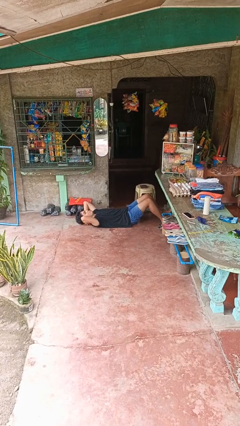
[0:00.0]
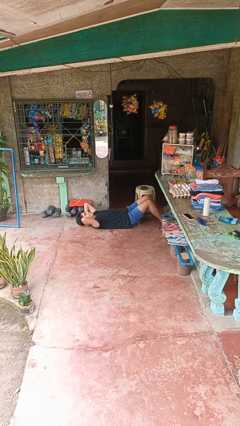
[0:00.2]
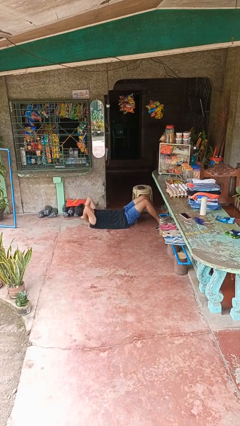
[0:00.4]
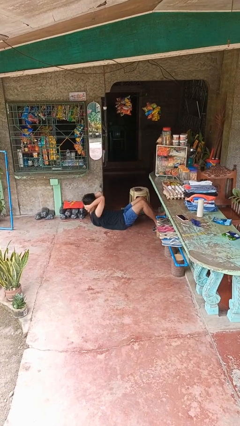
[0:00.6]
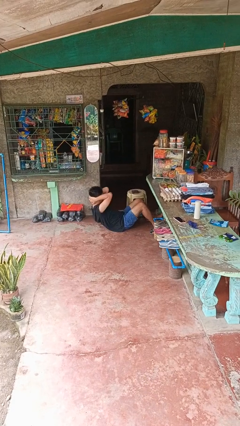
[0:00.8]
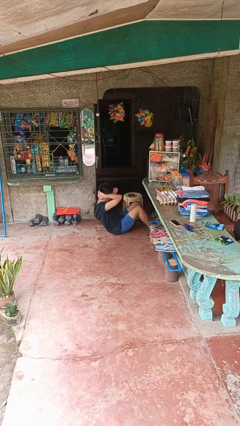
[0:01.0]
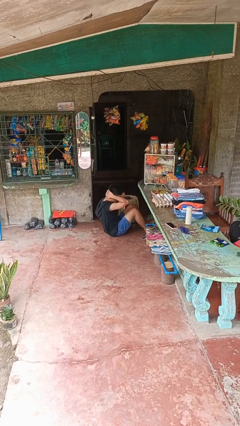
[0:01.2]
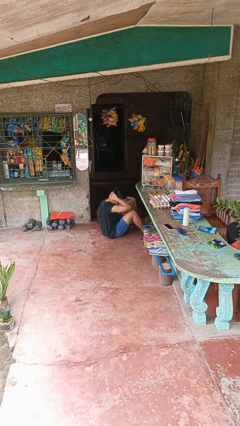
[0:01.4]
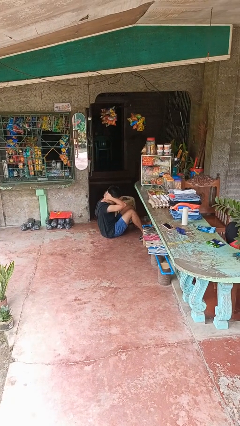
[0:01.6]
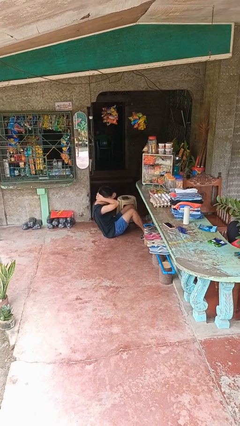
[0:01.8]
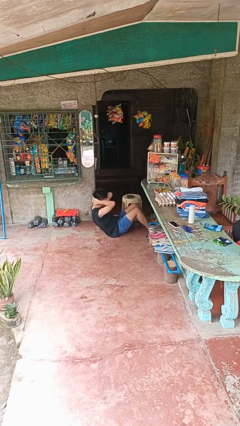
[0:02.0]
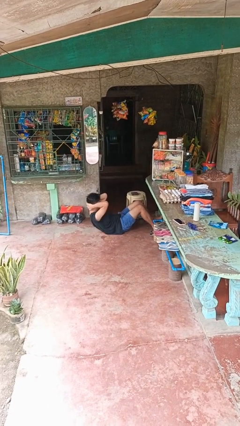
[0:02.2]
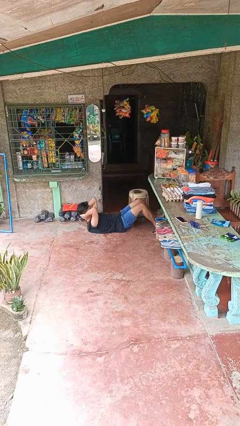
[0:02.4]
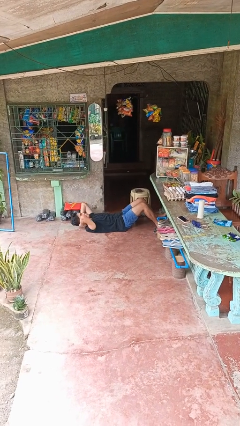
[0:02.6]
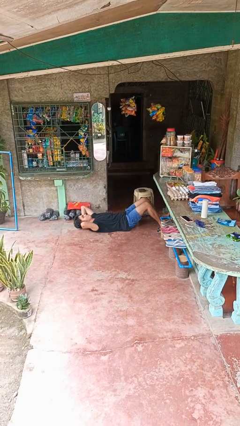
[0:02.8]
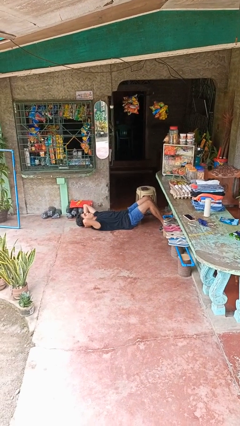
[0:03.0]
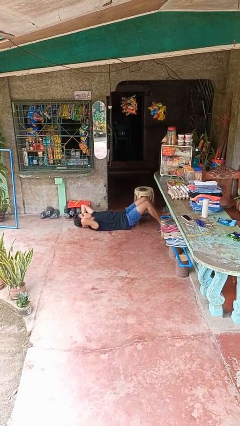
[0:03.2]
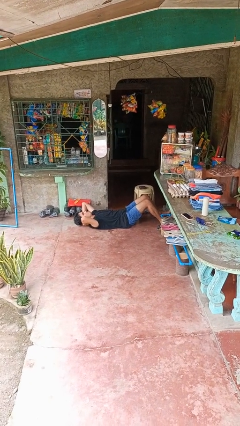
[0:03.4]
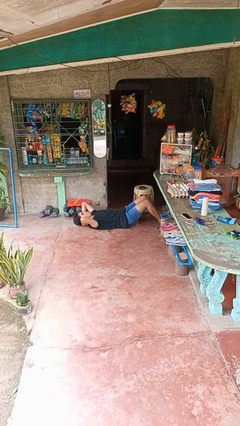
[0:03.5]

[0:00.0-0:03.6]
person exercises with situp

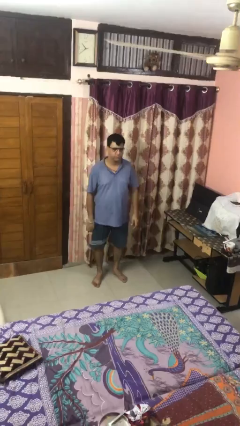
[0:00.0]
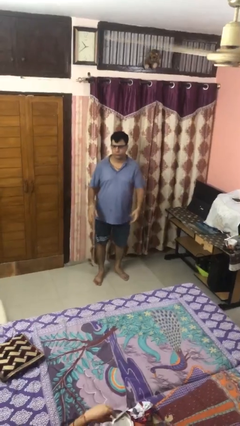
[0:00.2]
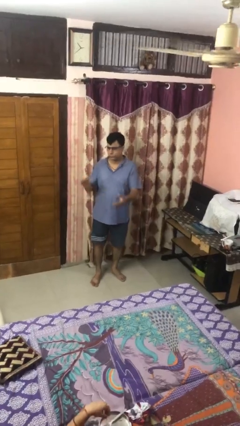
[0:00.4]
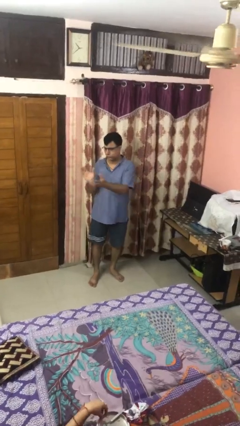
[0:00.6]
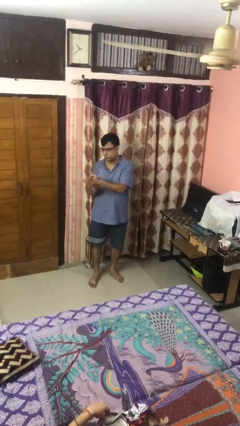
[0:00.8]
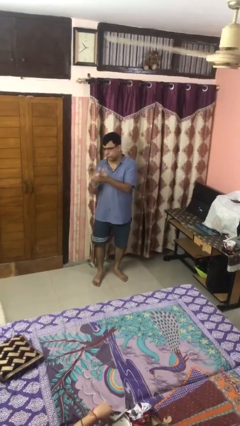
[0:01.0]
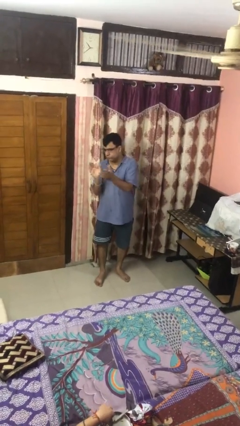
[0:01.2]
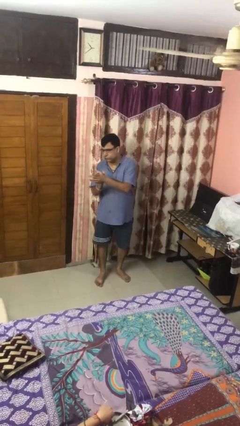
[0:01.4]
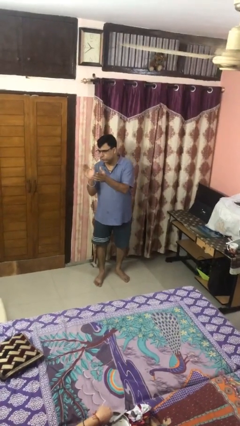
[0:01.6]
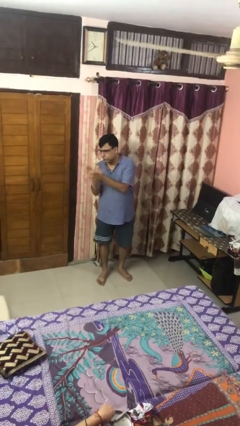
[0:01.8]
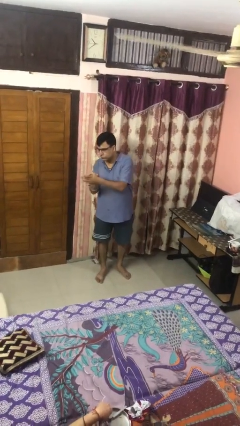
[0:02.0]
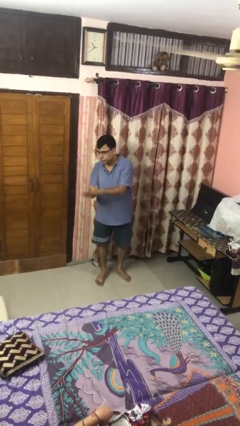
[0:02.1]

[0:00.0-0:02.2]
person claps hands

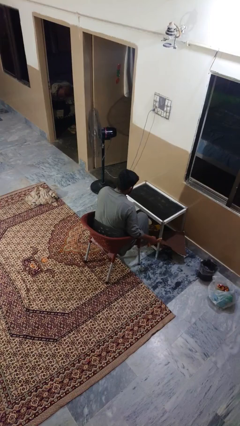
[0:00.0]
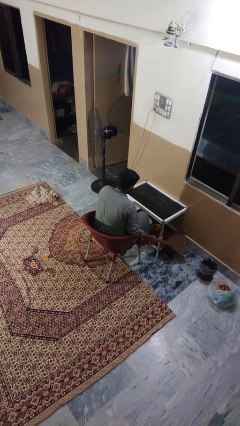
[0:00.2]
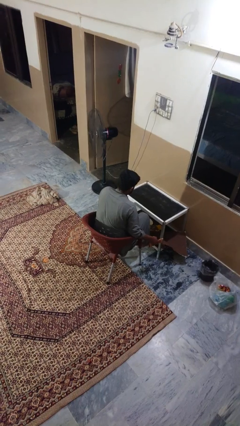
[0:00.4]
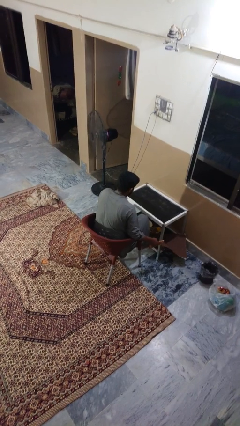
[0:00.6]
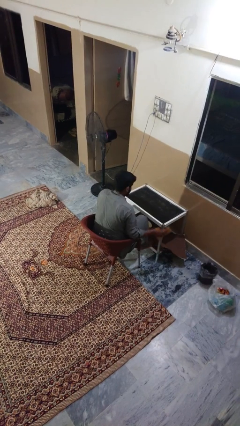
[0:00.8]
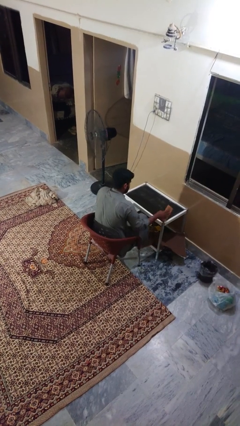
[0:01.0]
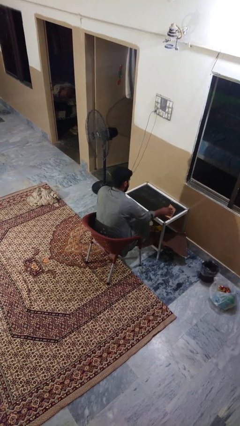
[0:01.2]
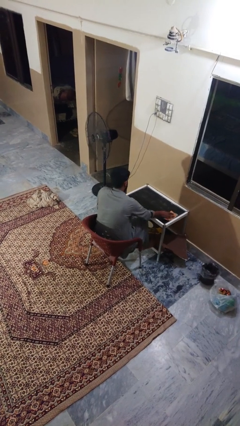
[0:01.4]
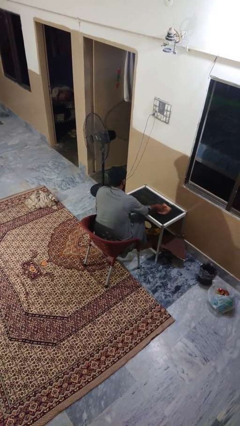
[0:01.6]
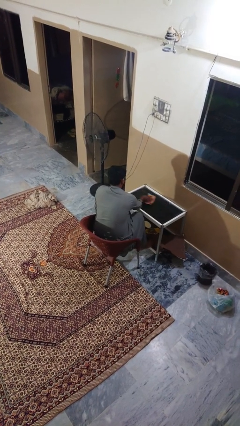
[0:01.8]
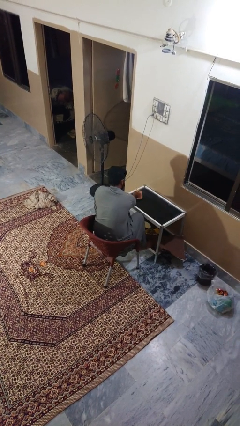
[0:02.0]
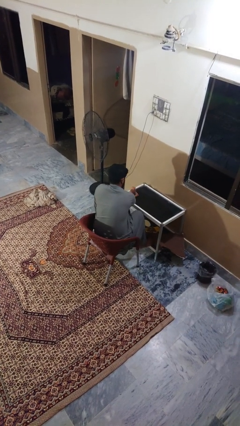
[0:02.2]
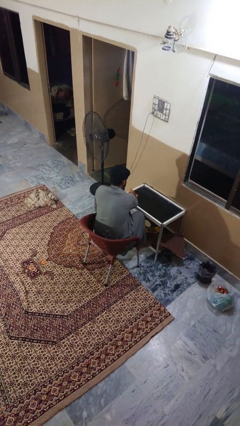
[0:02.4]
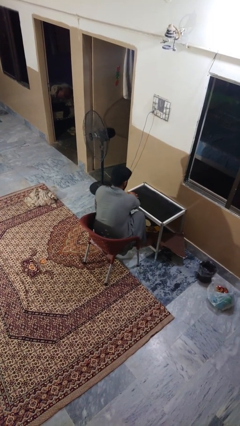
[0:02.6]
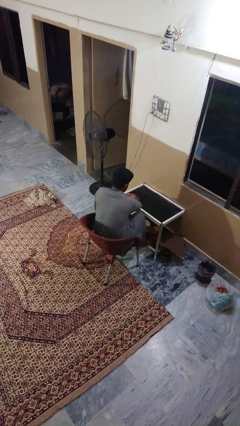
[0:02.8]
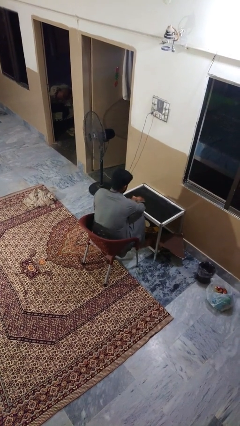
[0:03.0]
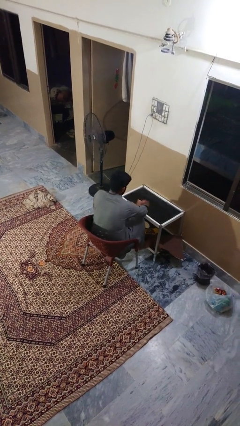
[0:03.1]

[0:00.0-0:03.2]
person cleans table with rag

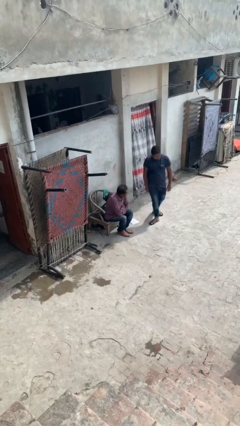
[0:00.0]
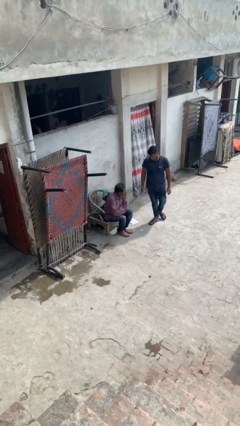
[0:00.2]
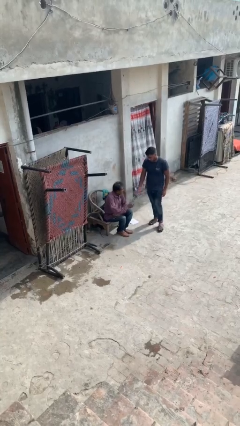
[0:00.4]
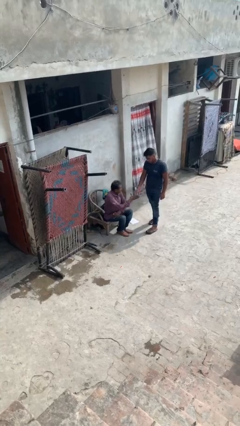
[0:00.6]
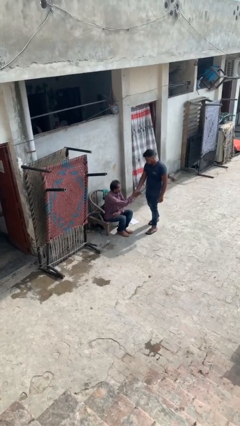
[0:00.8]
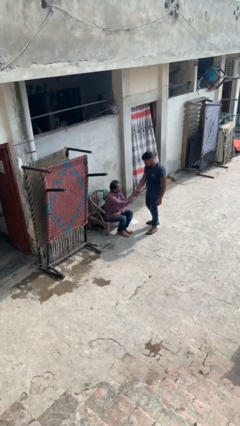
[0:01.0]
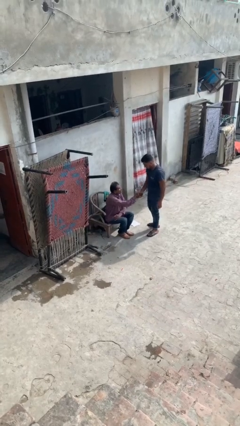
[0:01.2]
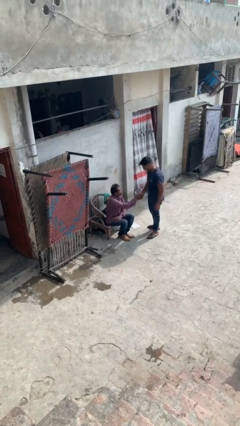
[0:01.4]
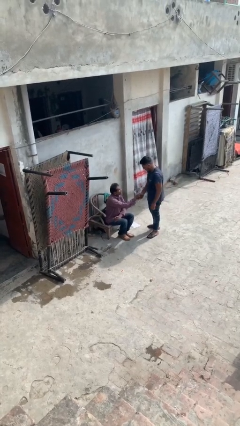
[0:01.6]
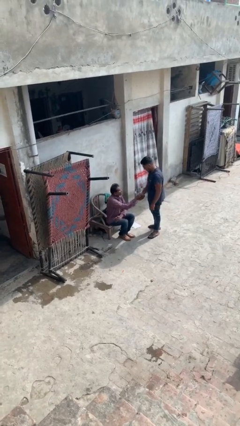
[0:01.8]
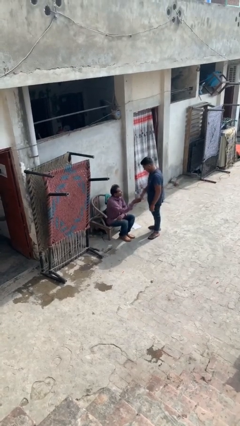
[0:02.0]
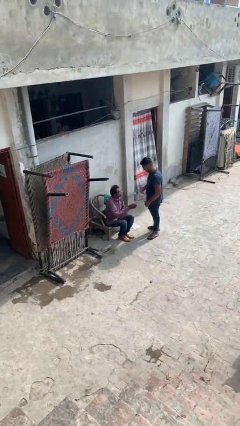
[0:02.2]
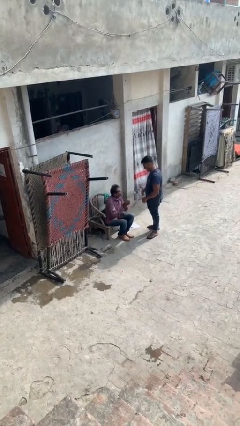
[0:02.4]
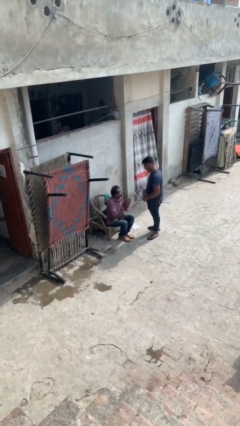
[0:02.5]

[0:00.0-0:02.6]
person shakes hand

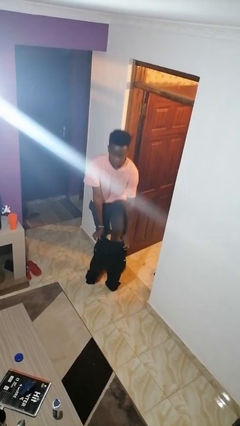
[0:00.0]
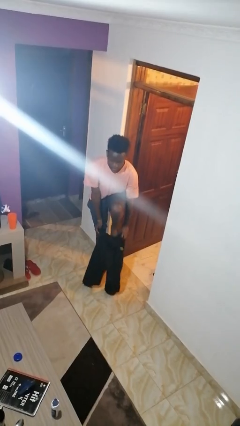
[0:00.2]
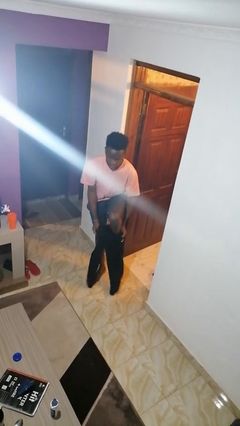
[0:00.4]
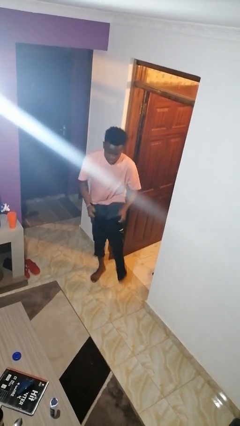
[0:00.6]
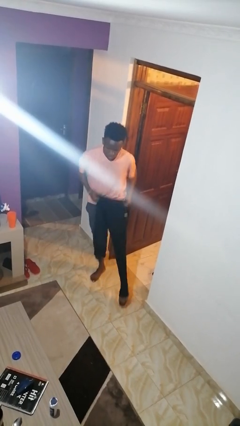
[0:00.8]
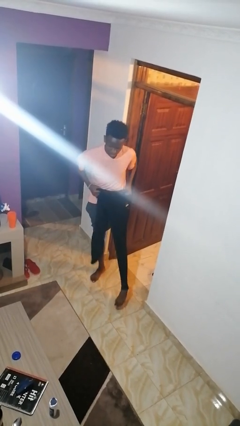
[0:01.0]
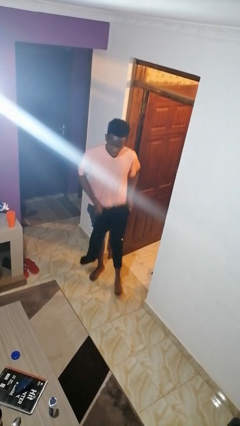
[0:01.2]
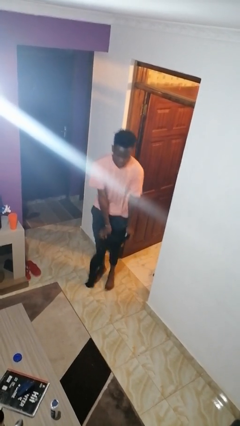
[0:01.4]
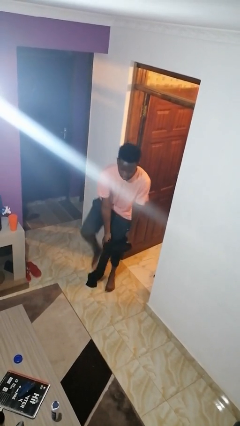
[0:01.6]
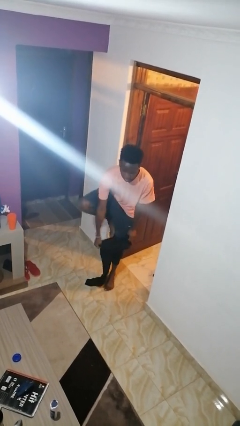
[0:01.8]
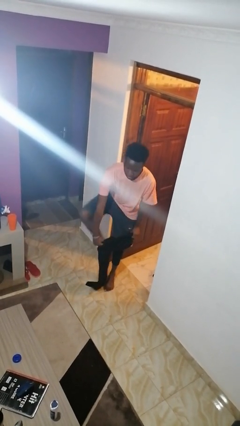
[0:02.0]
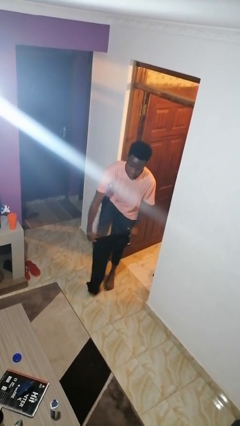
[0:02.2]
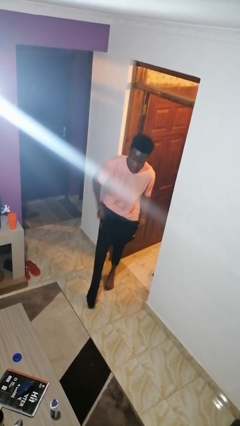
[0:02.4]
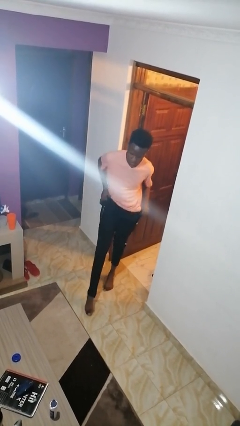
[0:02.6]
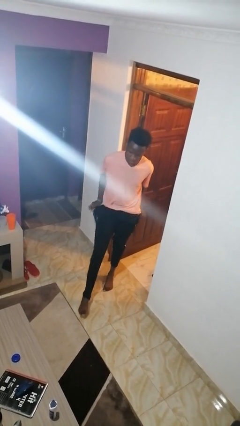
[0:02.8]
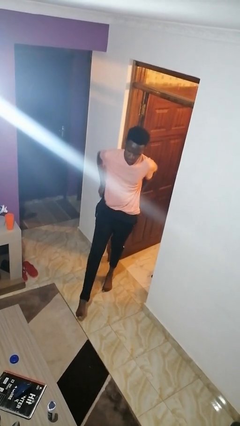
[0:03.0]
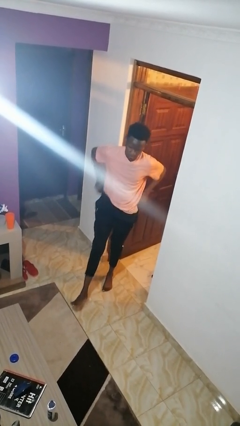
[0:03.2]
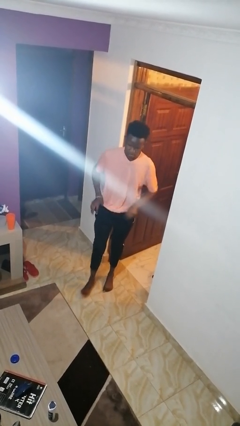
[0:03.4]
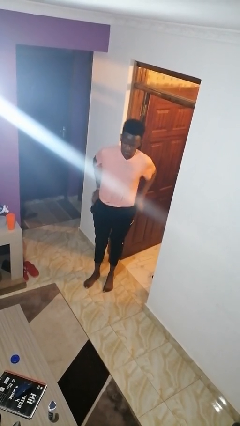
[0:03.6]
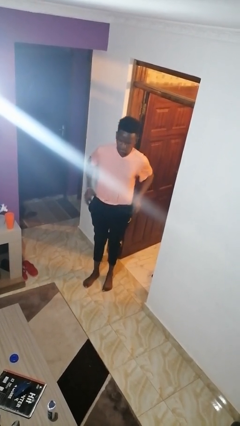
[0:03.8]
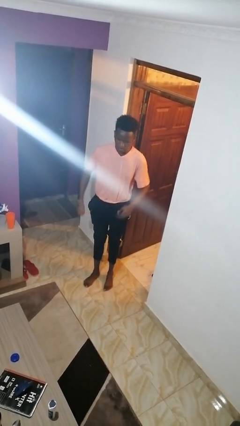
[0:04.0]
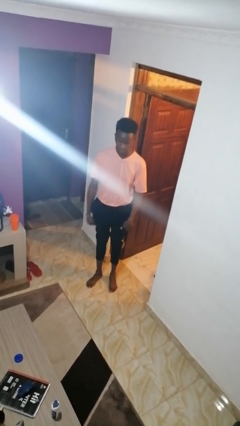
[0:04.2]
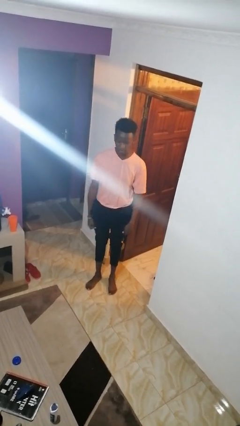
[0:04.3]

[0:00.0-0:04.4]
person puts on pants

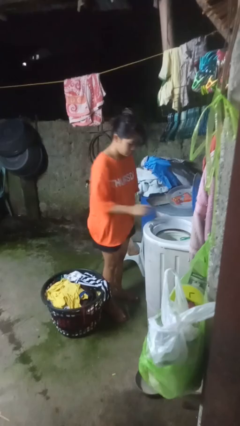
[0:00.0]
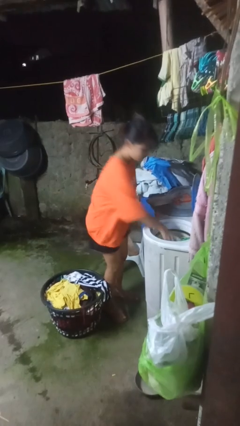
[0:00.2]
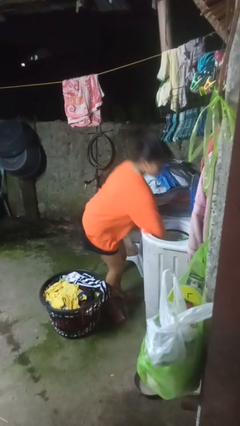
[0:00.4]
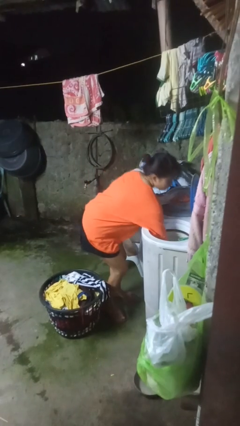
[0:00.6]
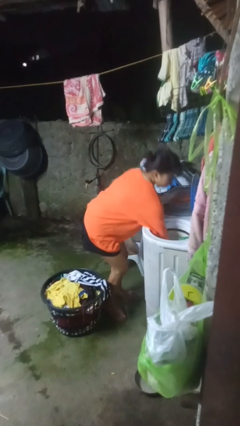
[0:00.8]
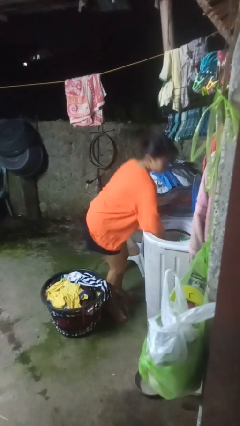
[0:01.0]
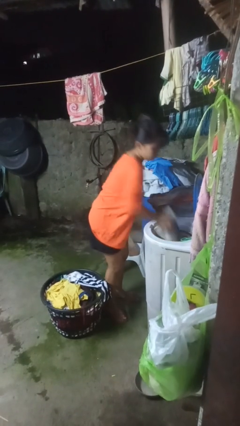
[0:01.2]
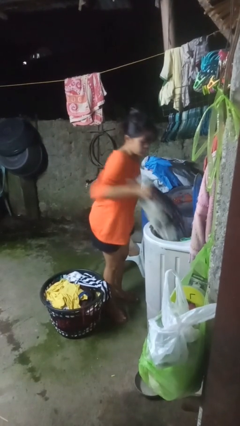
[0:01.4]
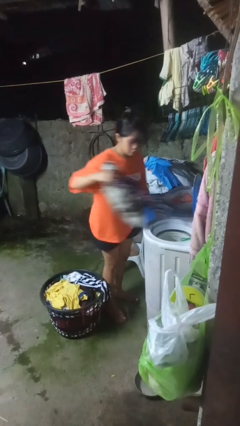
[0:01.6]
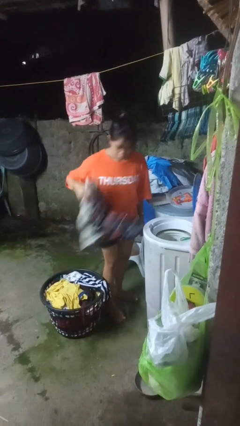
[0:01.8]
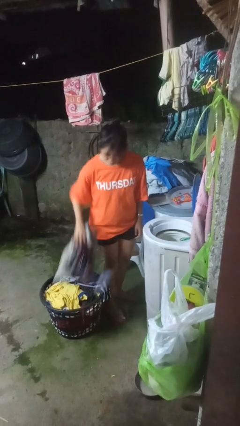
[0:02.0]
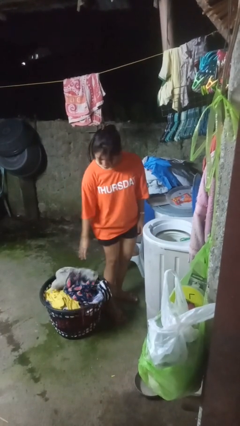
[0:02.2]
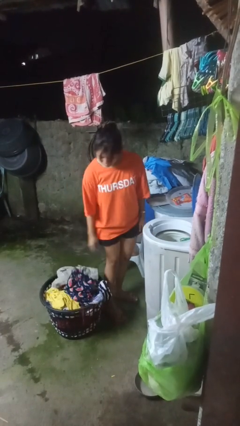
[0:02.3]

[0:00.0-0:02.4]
person unloads dryer
